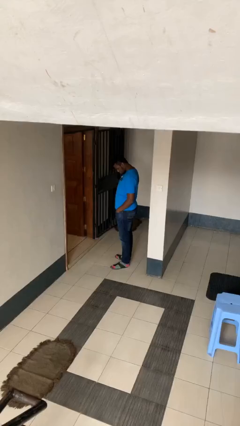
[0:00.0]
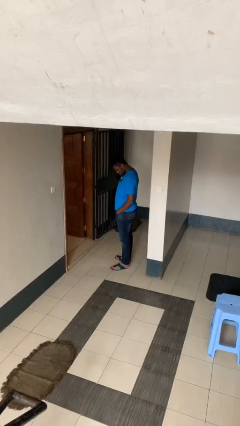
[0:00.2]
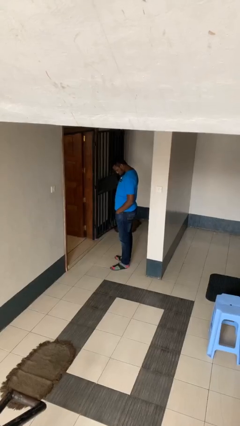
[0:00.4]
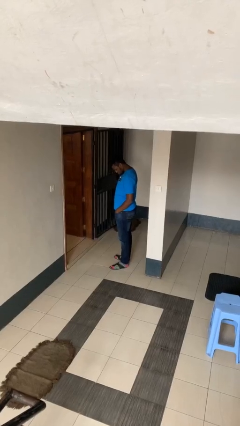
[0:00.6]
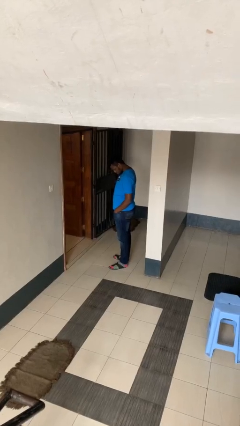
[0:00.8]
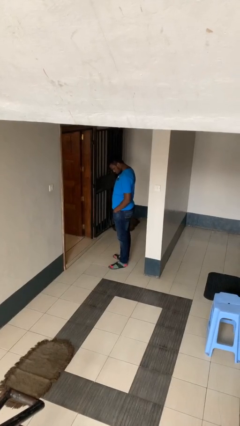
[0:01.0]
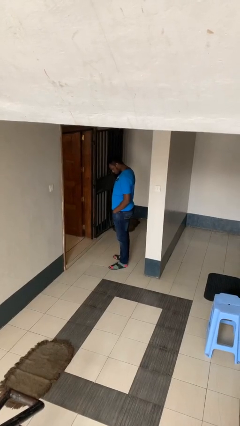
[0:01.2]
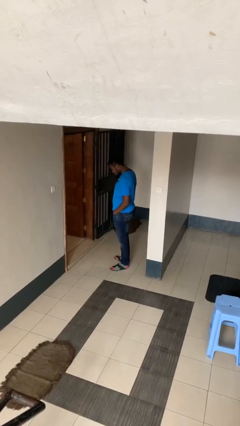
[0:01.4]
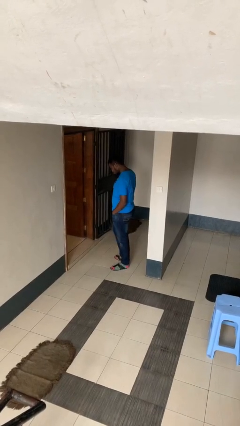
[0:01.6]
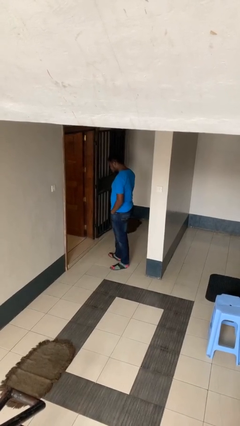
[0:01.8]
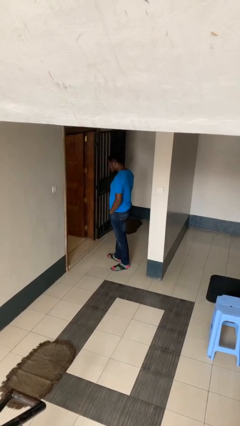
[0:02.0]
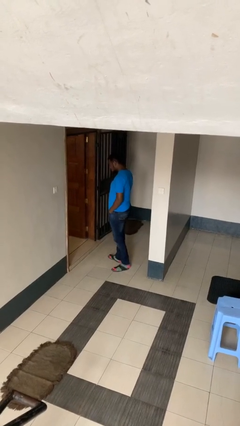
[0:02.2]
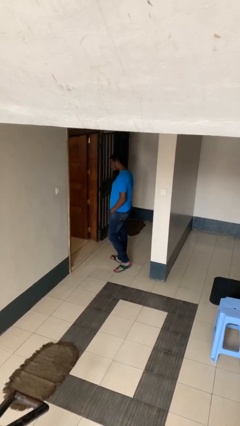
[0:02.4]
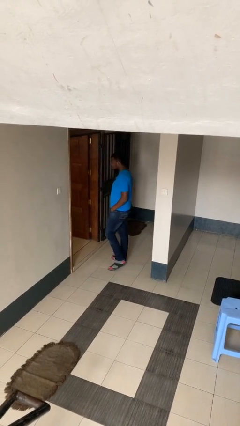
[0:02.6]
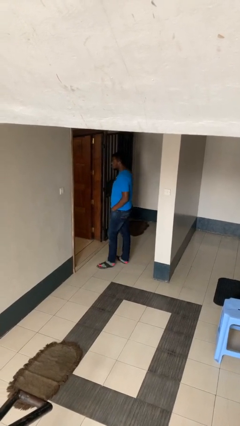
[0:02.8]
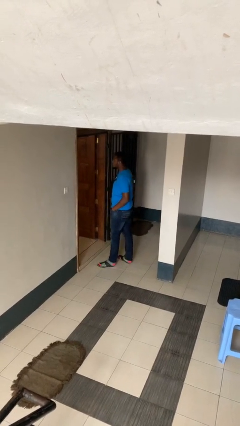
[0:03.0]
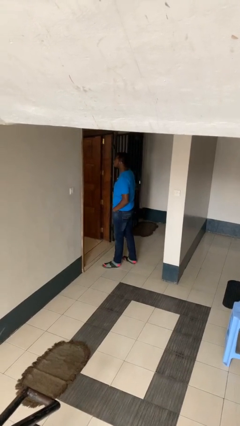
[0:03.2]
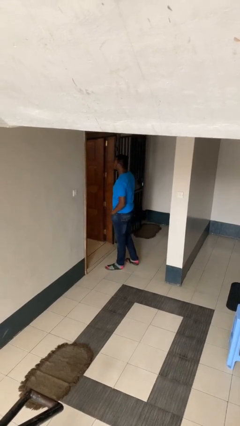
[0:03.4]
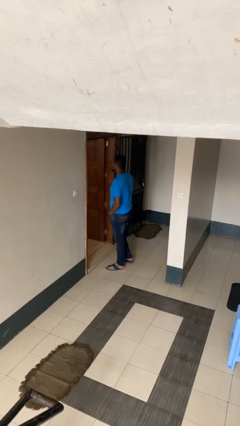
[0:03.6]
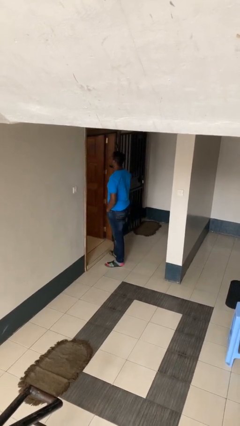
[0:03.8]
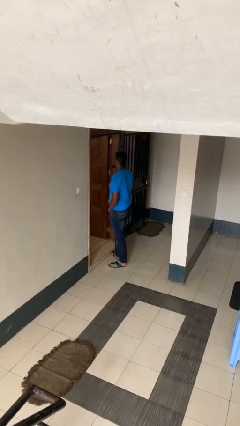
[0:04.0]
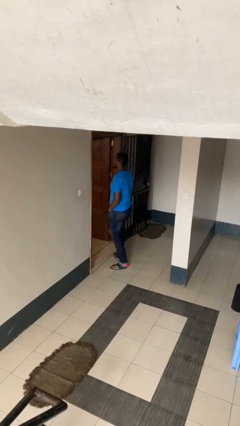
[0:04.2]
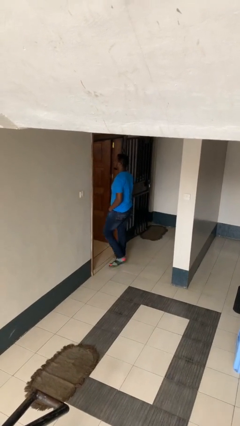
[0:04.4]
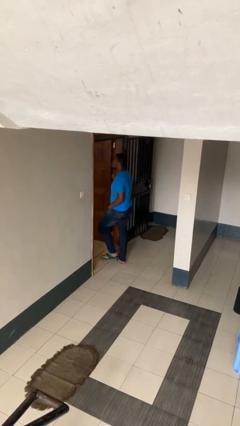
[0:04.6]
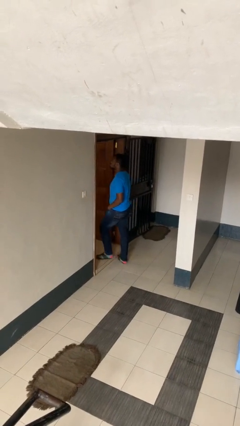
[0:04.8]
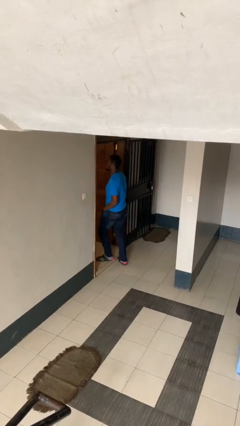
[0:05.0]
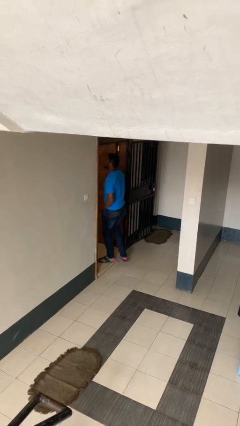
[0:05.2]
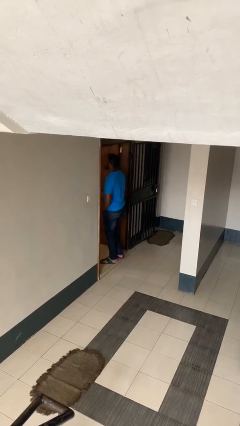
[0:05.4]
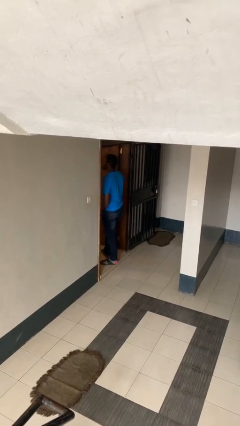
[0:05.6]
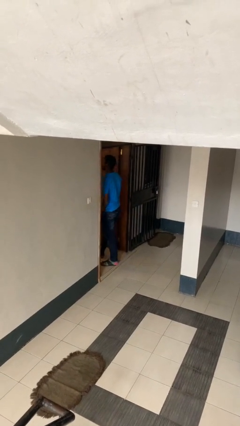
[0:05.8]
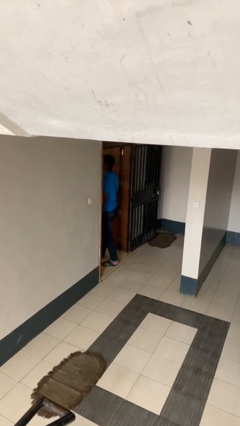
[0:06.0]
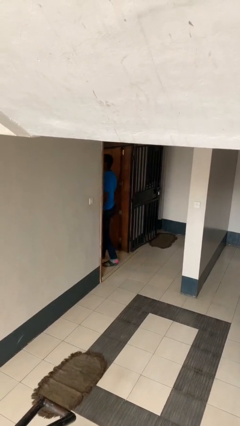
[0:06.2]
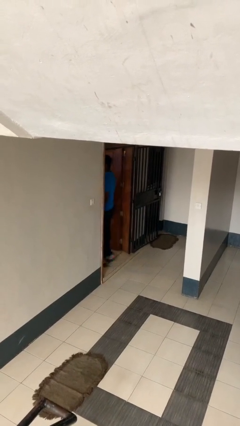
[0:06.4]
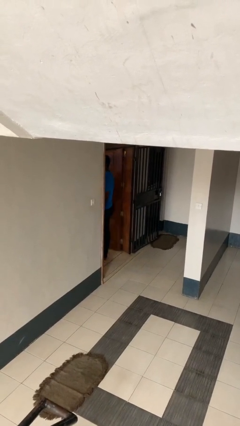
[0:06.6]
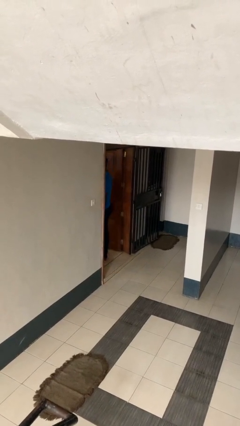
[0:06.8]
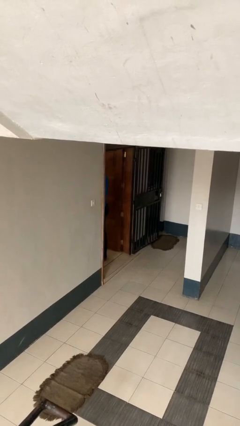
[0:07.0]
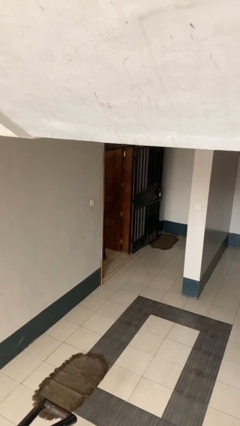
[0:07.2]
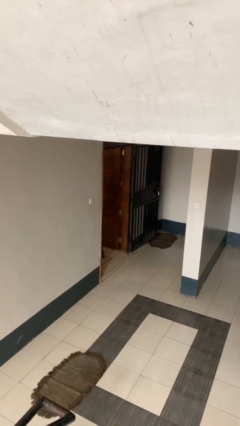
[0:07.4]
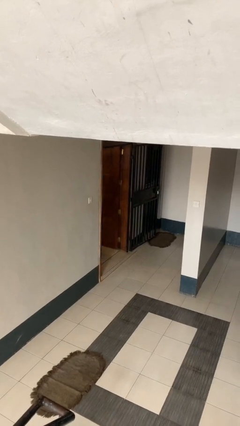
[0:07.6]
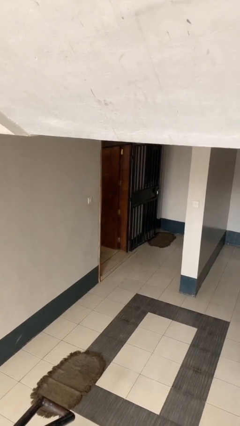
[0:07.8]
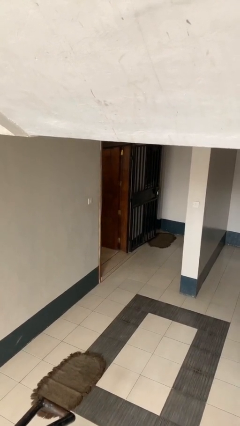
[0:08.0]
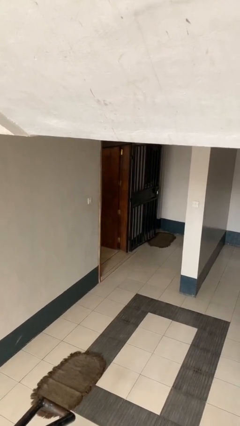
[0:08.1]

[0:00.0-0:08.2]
person exits scene through structure

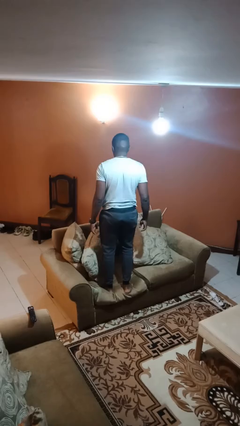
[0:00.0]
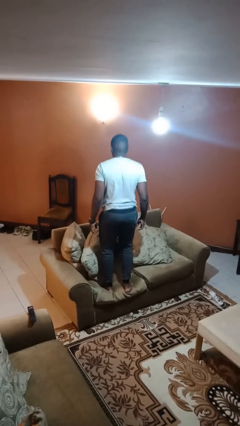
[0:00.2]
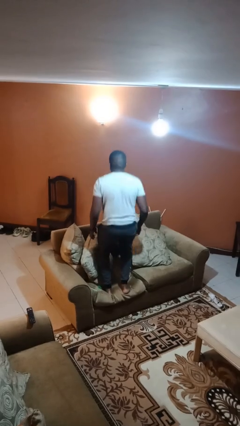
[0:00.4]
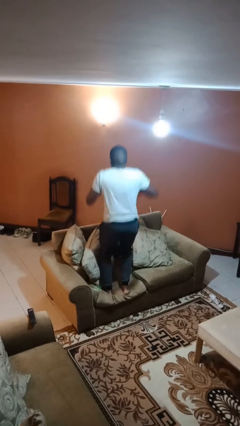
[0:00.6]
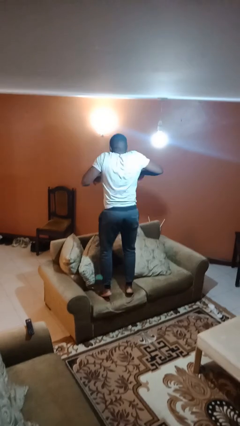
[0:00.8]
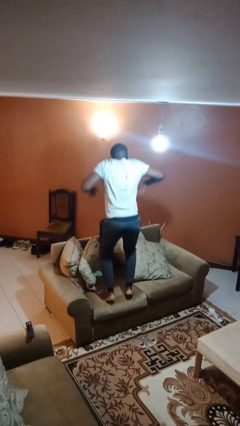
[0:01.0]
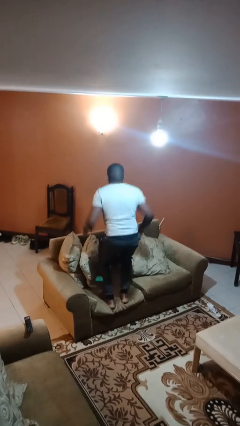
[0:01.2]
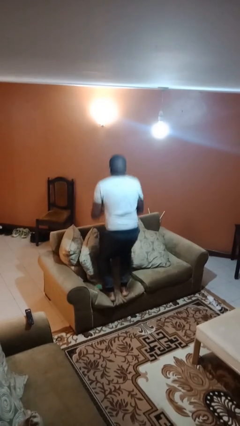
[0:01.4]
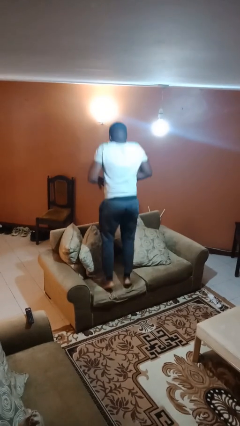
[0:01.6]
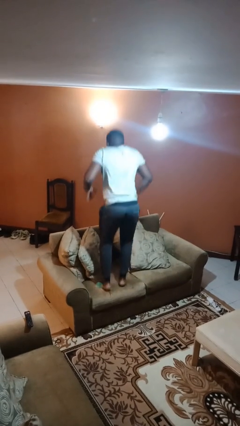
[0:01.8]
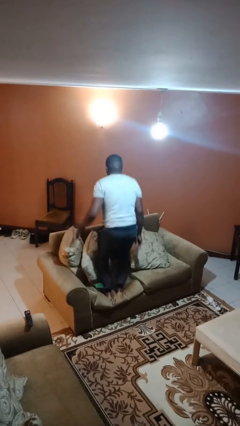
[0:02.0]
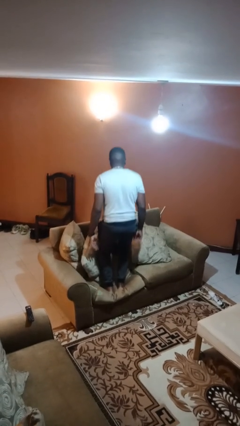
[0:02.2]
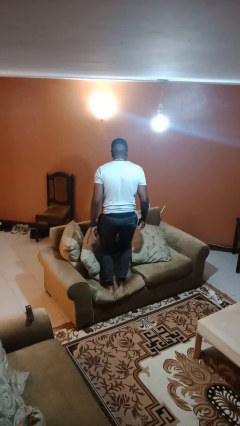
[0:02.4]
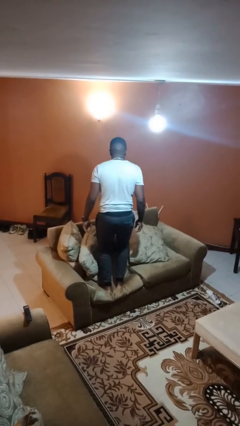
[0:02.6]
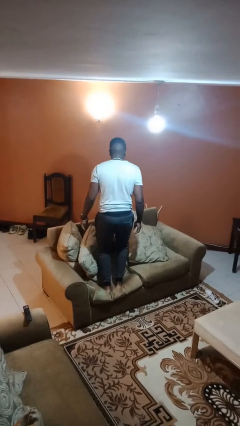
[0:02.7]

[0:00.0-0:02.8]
person jumps on couch

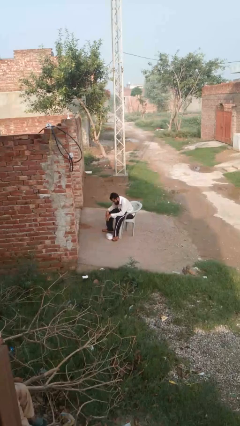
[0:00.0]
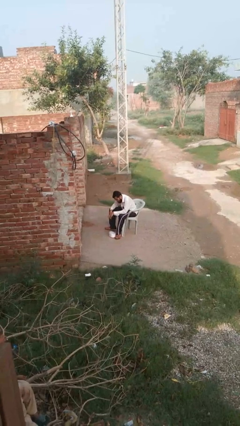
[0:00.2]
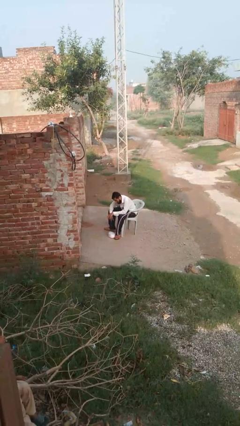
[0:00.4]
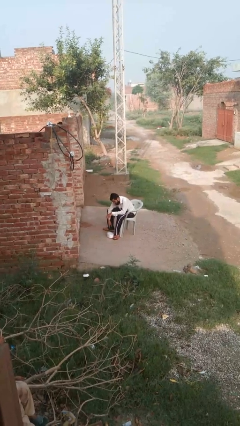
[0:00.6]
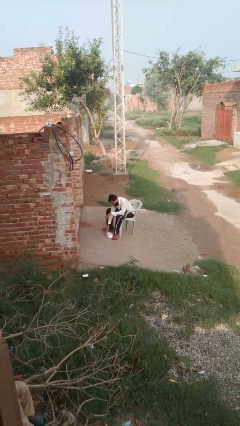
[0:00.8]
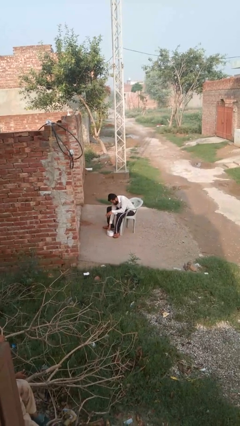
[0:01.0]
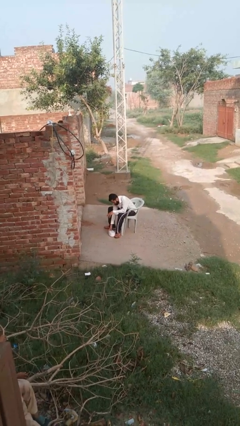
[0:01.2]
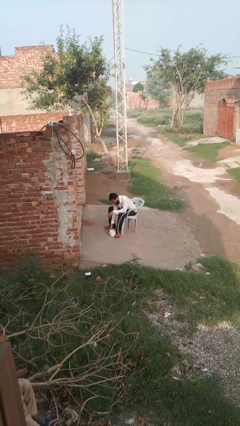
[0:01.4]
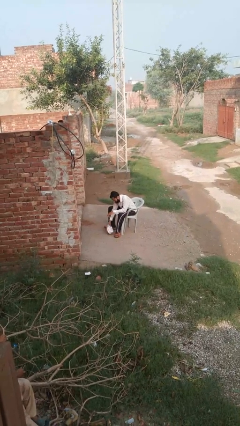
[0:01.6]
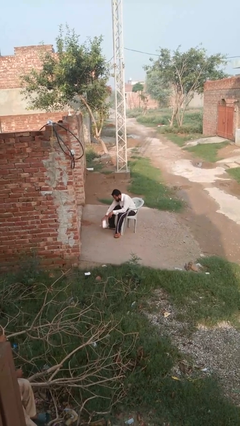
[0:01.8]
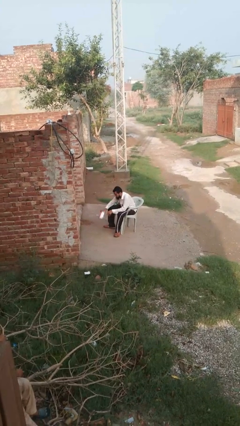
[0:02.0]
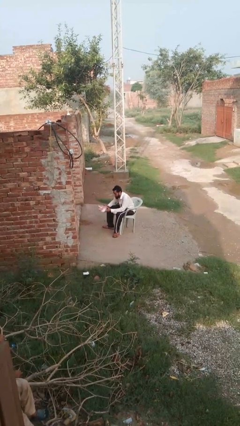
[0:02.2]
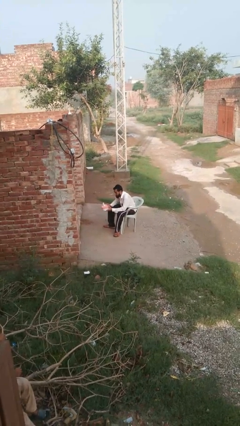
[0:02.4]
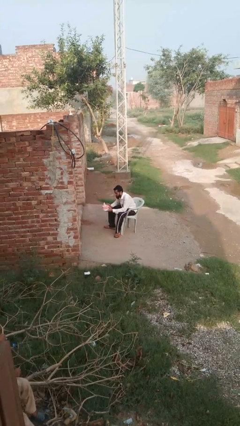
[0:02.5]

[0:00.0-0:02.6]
person picks up object from floor

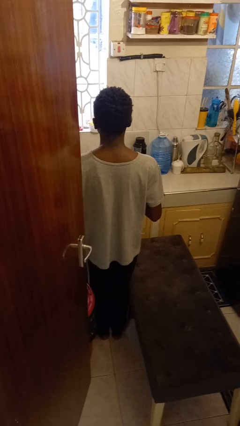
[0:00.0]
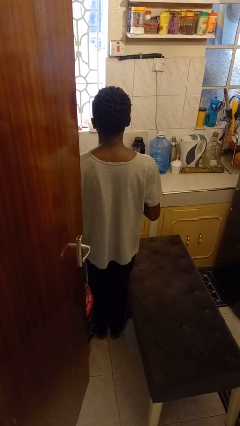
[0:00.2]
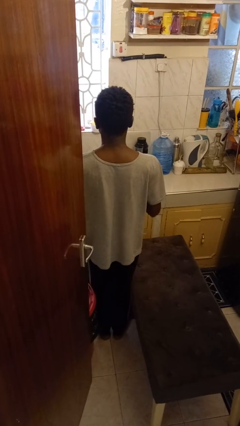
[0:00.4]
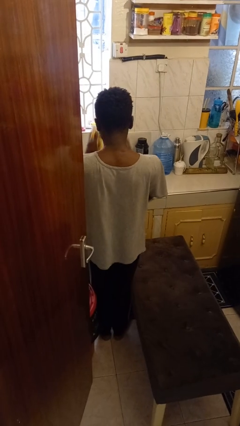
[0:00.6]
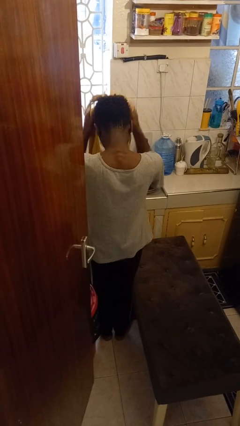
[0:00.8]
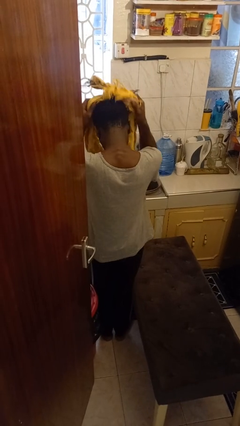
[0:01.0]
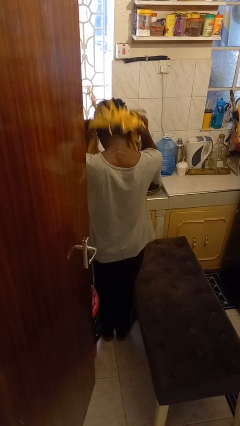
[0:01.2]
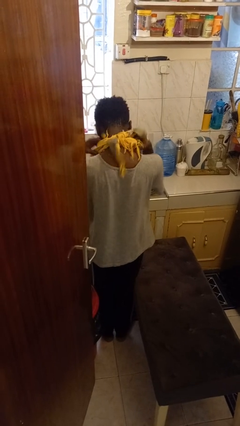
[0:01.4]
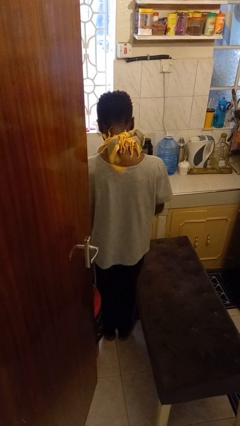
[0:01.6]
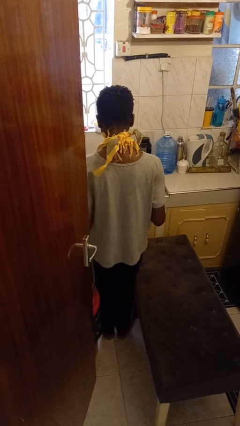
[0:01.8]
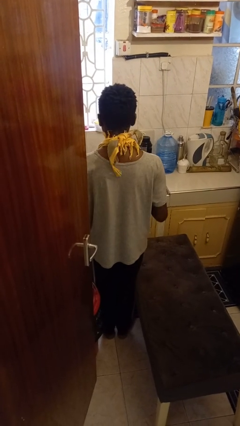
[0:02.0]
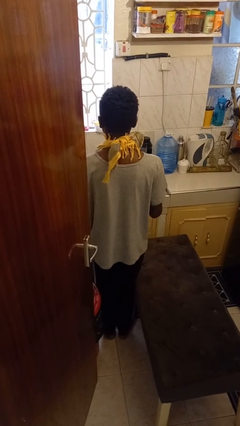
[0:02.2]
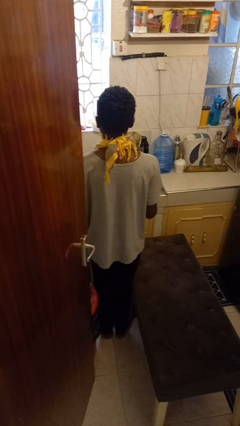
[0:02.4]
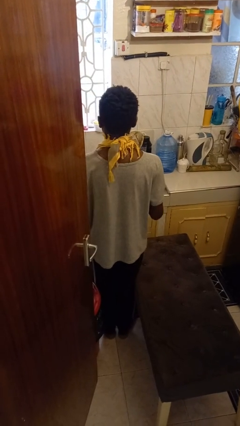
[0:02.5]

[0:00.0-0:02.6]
person puts on apron

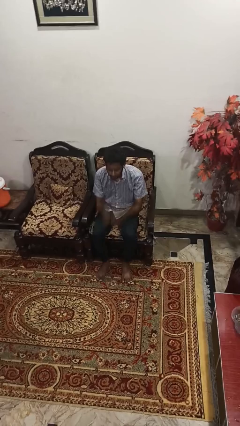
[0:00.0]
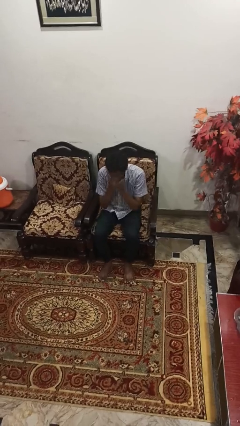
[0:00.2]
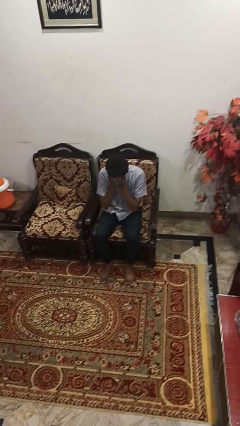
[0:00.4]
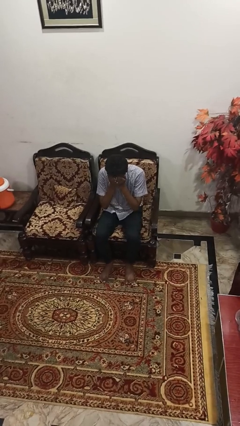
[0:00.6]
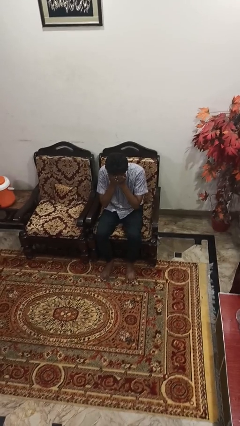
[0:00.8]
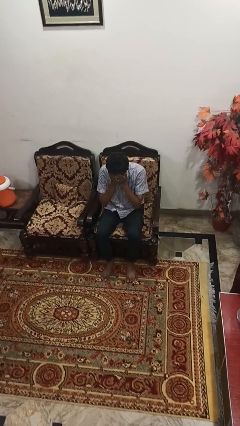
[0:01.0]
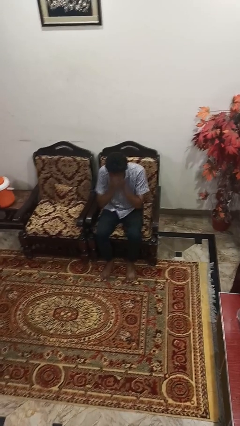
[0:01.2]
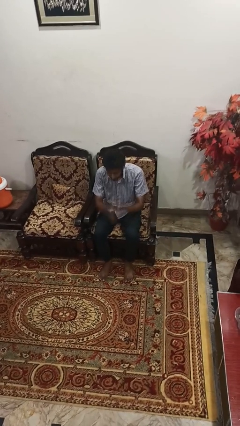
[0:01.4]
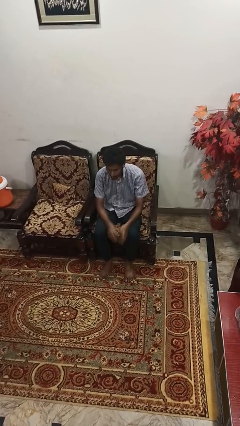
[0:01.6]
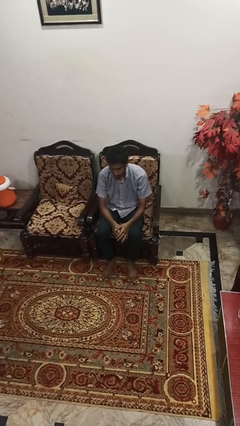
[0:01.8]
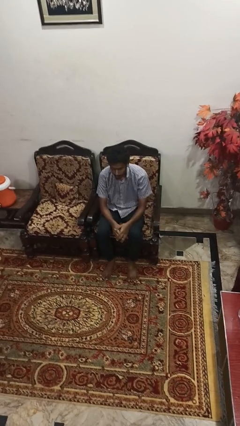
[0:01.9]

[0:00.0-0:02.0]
person covers face with hands
